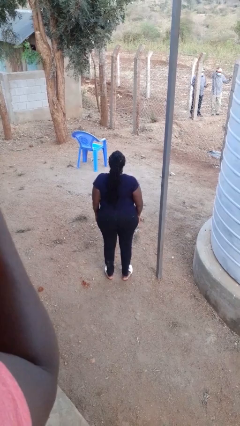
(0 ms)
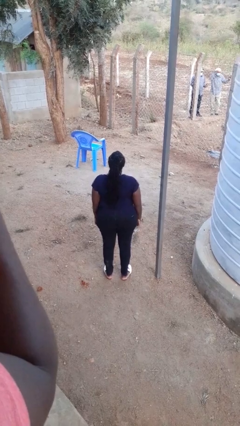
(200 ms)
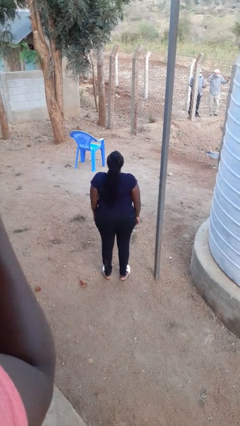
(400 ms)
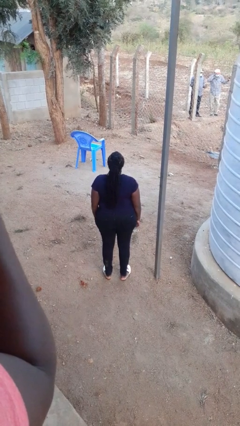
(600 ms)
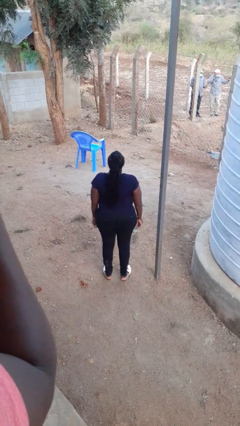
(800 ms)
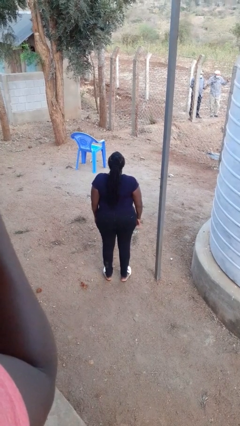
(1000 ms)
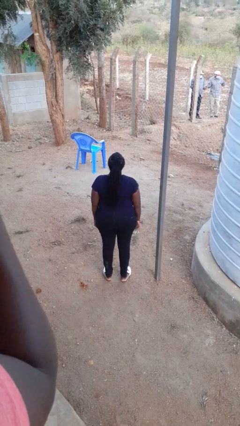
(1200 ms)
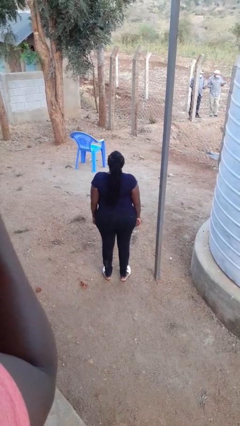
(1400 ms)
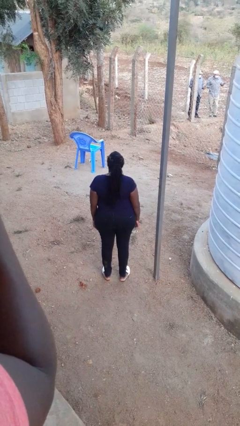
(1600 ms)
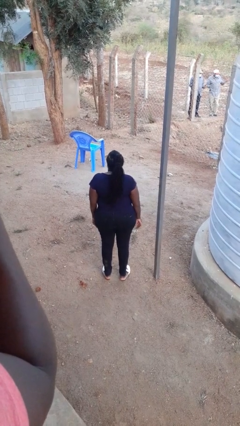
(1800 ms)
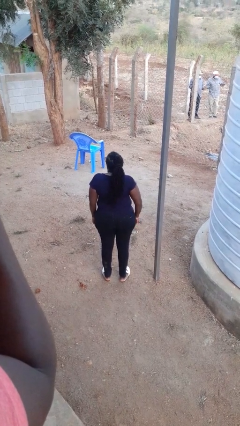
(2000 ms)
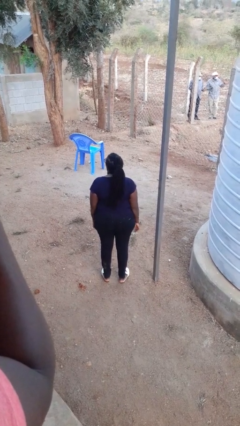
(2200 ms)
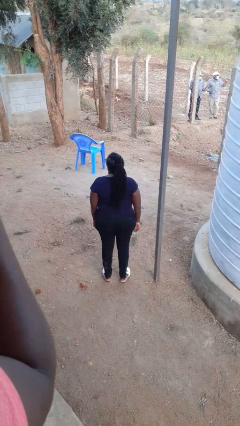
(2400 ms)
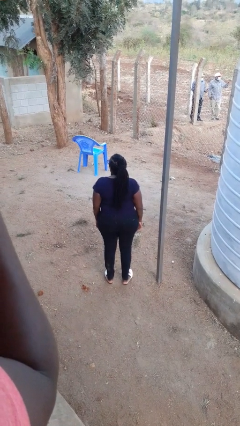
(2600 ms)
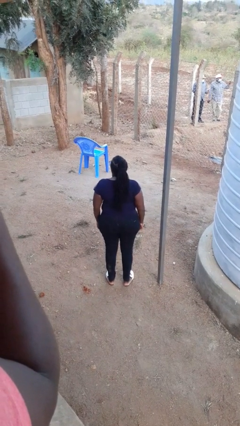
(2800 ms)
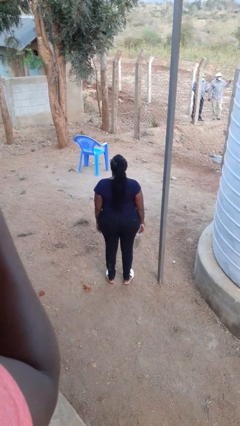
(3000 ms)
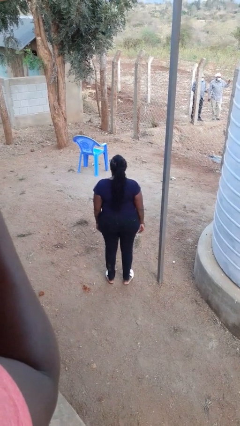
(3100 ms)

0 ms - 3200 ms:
person shrugs

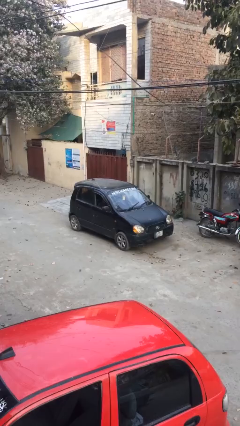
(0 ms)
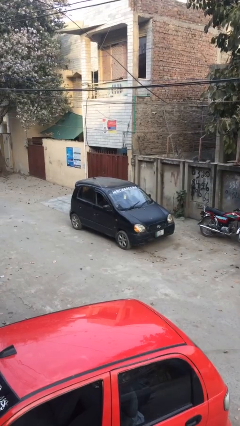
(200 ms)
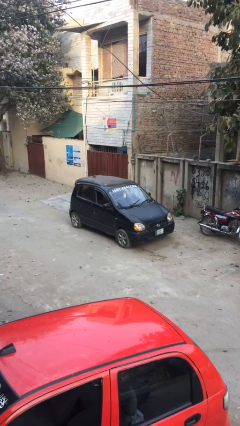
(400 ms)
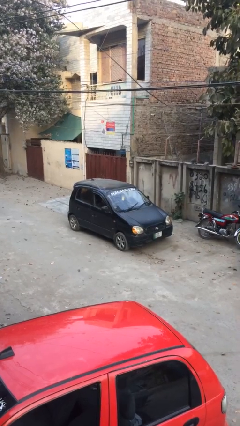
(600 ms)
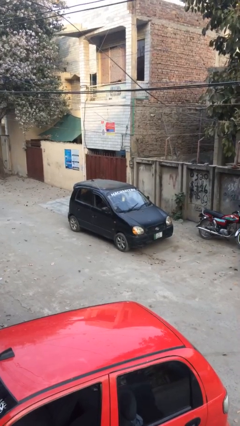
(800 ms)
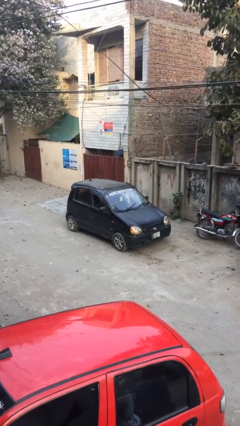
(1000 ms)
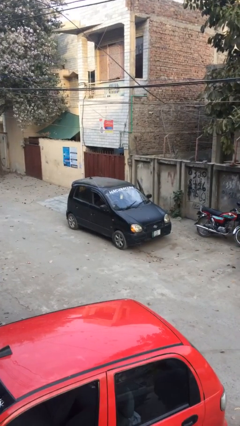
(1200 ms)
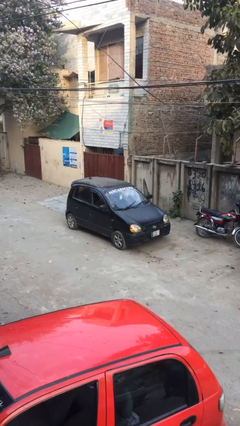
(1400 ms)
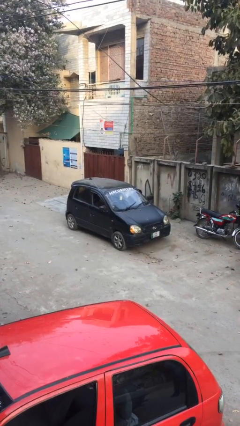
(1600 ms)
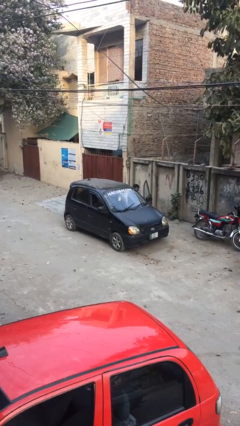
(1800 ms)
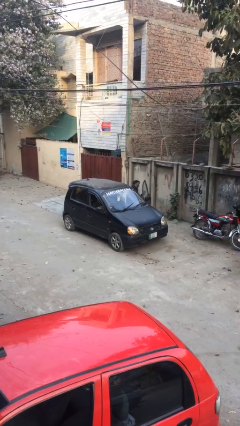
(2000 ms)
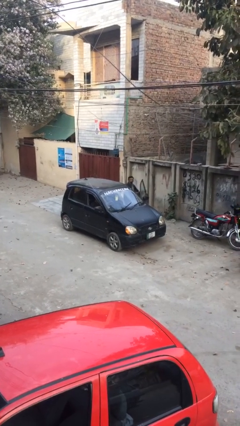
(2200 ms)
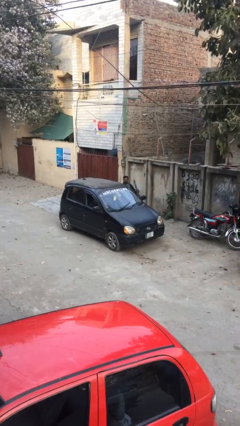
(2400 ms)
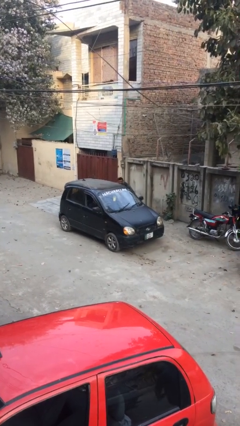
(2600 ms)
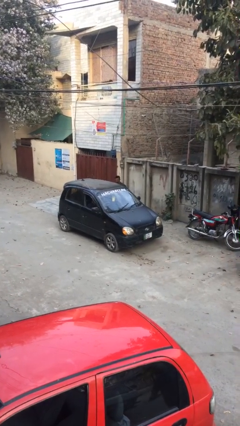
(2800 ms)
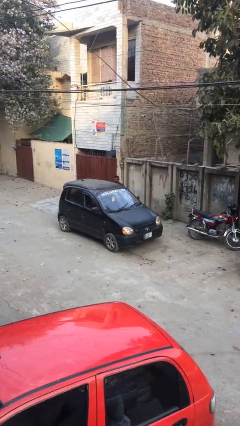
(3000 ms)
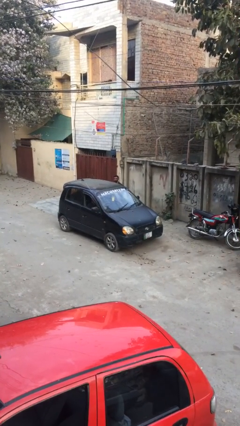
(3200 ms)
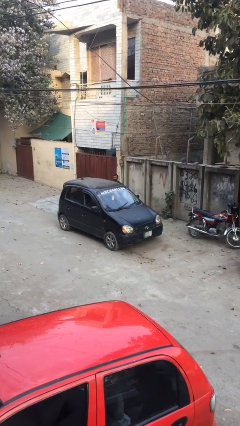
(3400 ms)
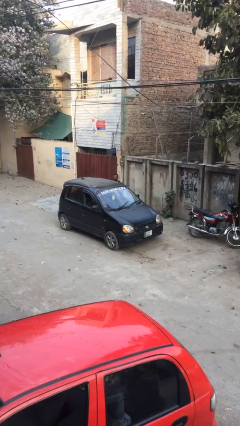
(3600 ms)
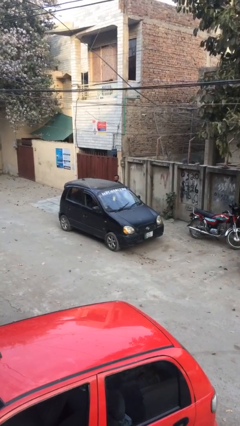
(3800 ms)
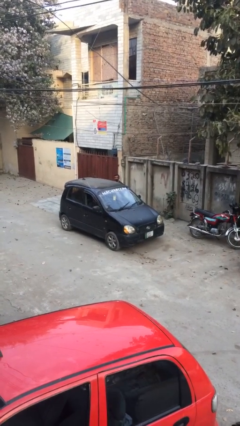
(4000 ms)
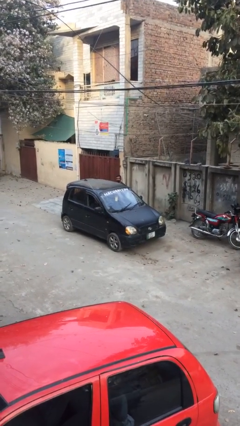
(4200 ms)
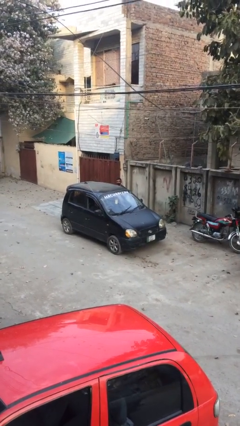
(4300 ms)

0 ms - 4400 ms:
car drops off person

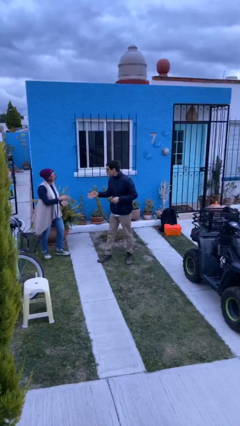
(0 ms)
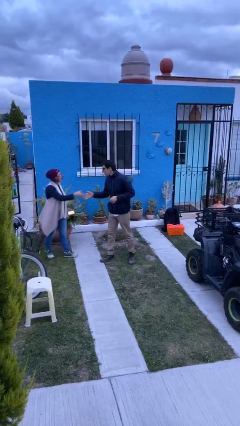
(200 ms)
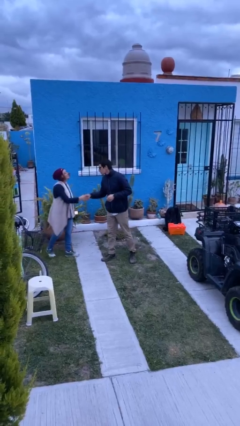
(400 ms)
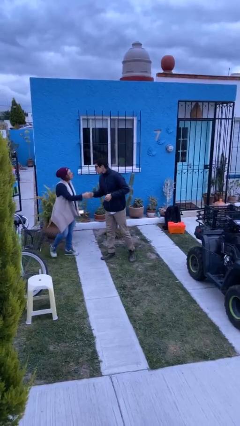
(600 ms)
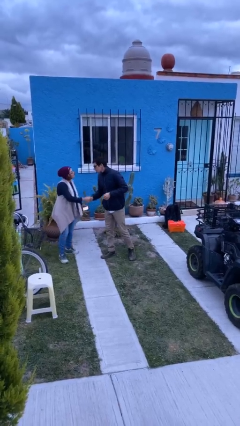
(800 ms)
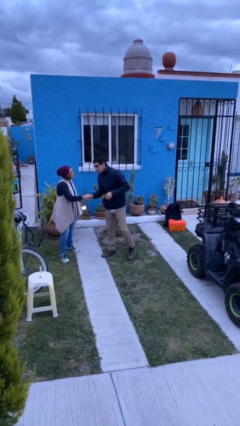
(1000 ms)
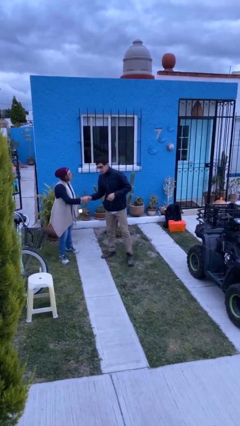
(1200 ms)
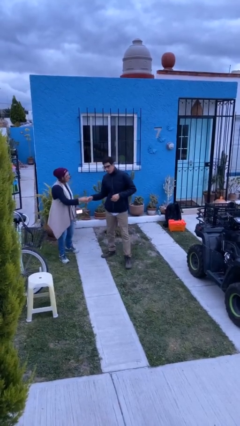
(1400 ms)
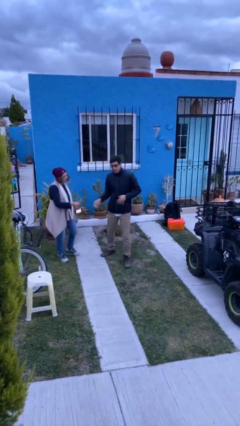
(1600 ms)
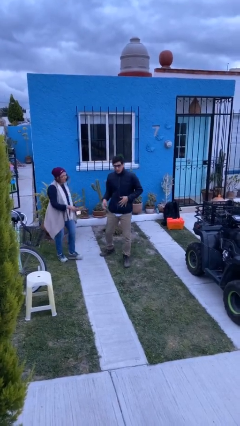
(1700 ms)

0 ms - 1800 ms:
person shakes hand

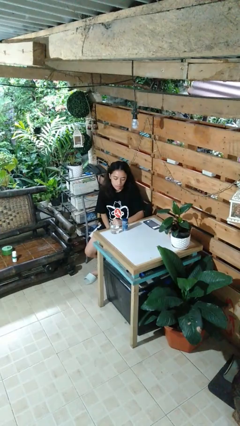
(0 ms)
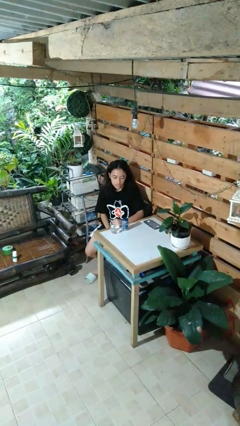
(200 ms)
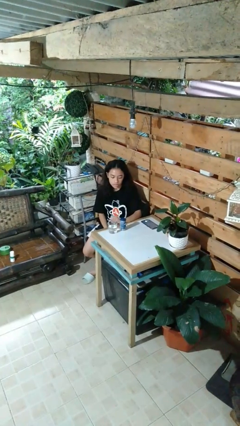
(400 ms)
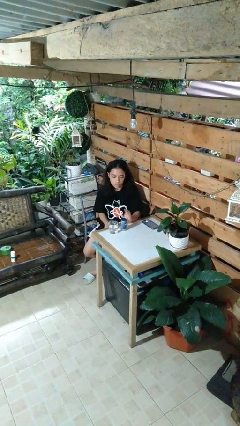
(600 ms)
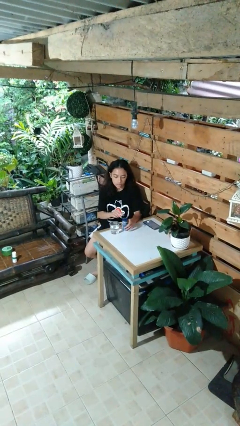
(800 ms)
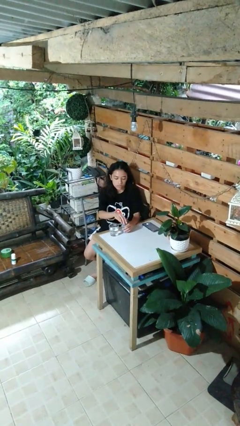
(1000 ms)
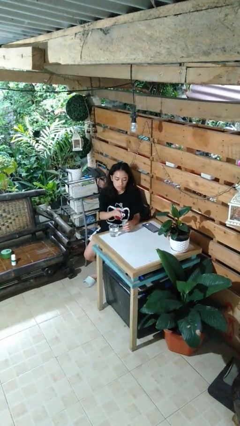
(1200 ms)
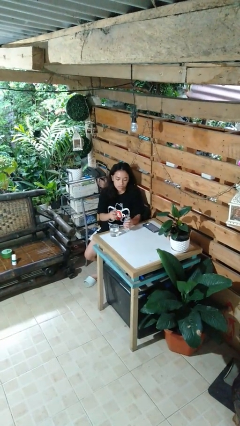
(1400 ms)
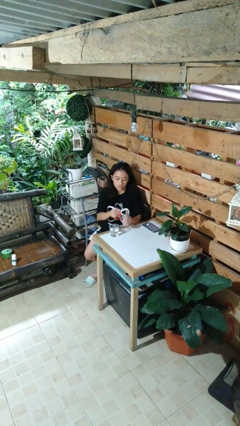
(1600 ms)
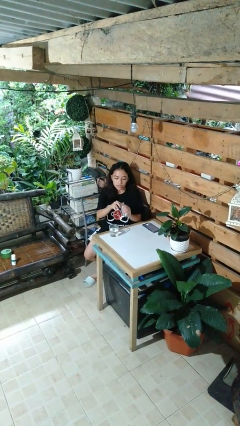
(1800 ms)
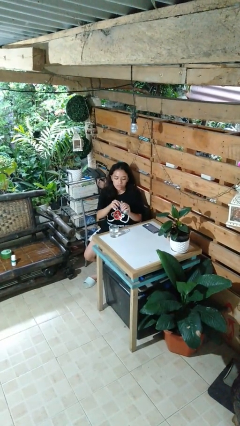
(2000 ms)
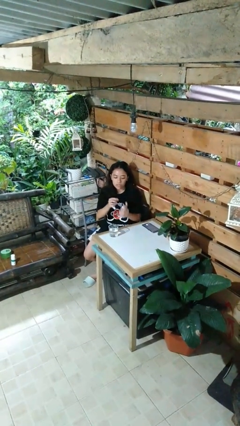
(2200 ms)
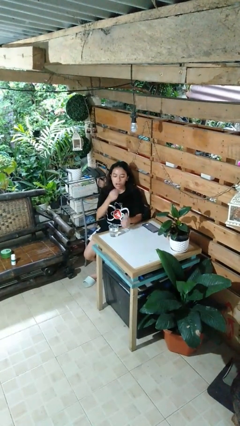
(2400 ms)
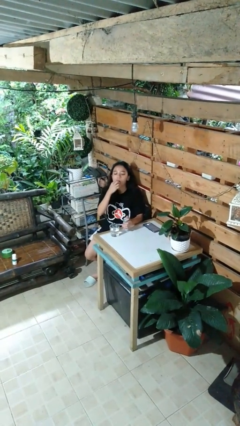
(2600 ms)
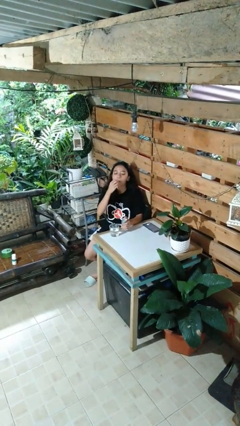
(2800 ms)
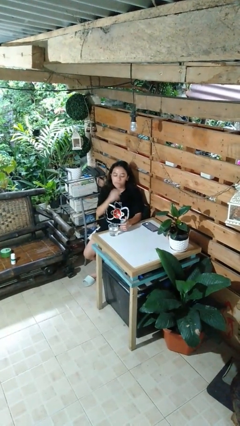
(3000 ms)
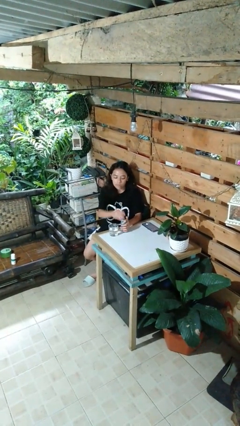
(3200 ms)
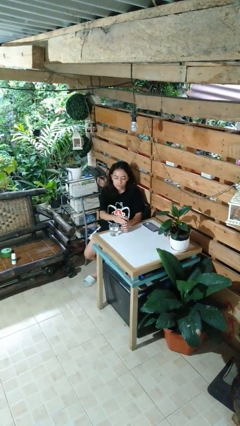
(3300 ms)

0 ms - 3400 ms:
person takes medicine pills

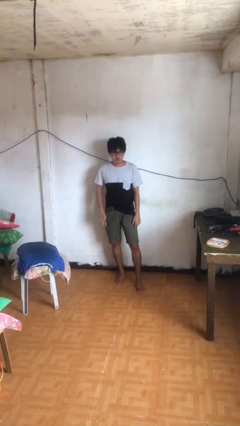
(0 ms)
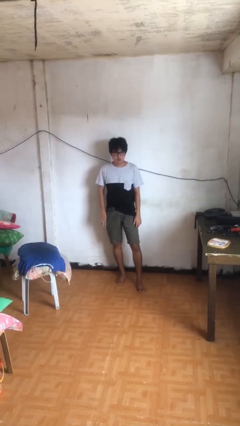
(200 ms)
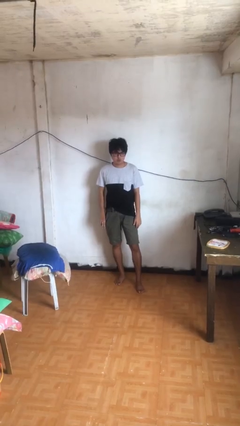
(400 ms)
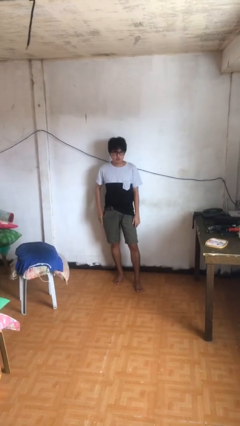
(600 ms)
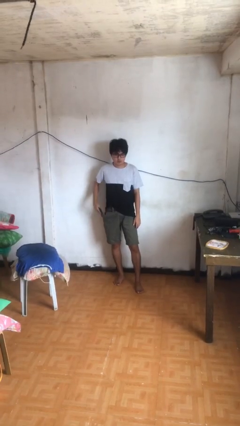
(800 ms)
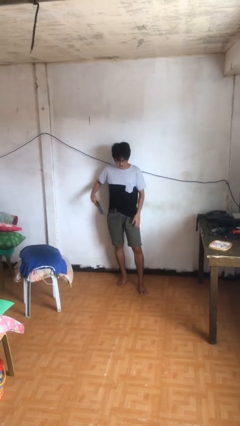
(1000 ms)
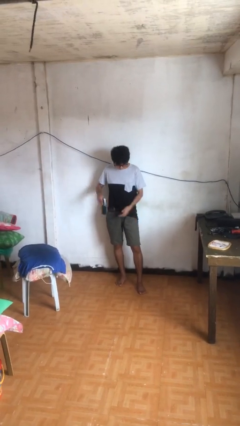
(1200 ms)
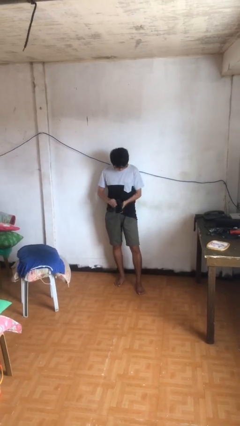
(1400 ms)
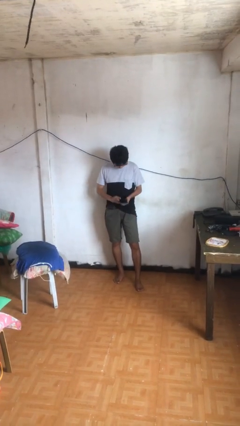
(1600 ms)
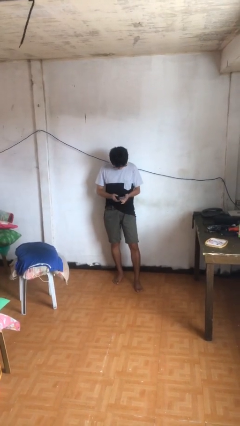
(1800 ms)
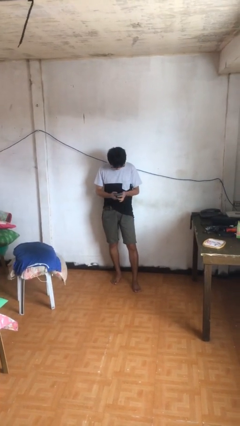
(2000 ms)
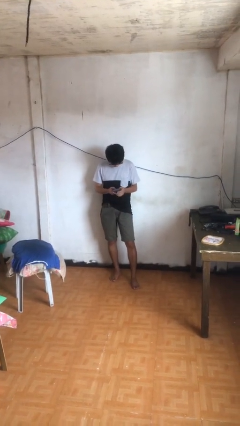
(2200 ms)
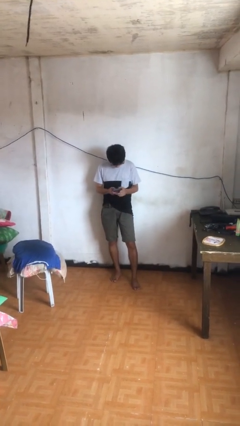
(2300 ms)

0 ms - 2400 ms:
person takes phone from pocket

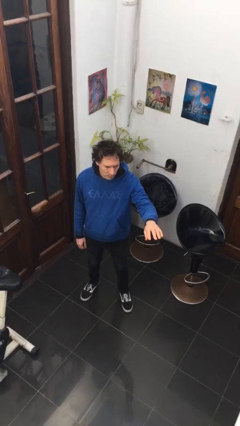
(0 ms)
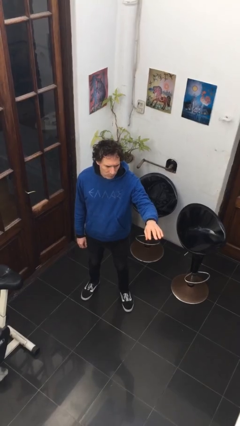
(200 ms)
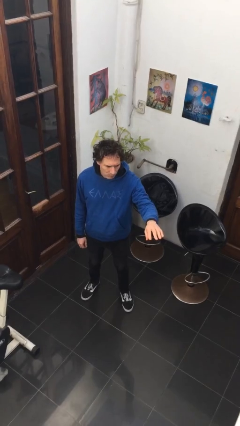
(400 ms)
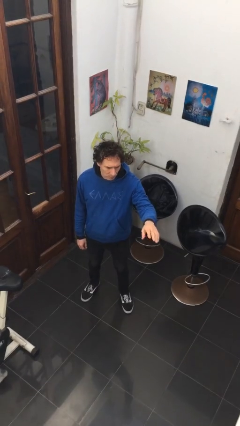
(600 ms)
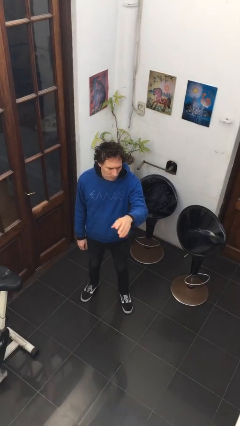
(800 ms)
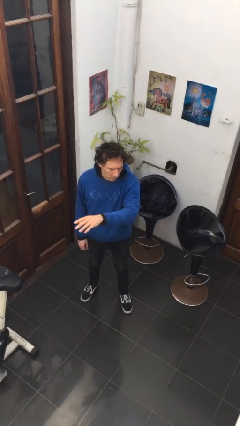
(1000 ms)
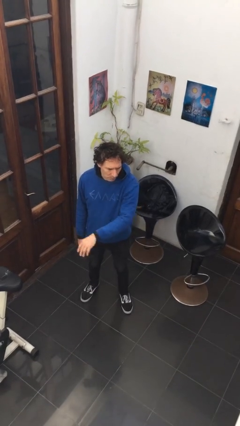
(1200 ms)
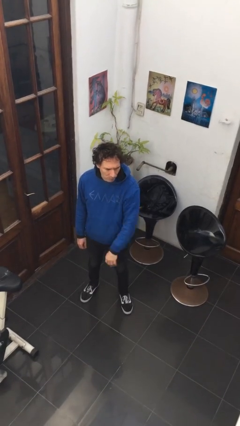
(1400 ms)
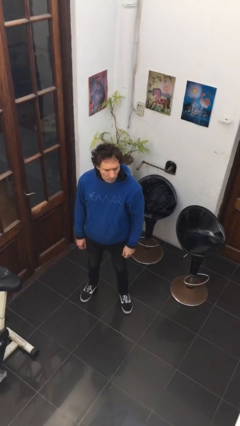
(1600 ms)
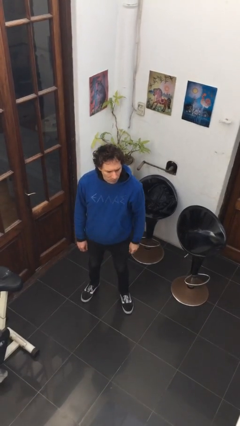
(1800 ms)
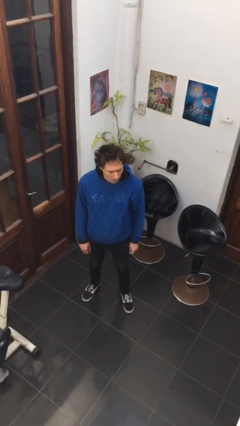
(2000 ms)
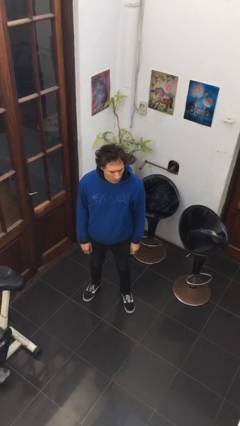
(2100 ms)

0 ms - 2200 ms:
person gestures swipe right
